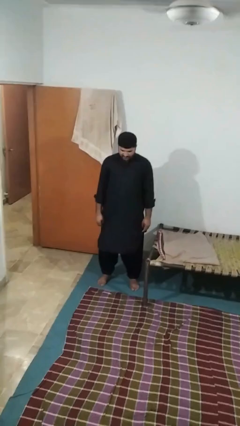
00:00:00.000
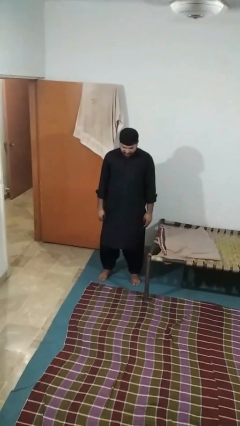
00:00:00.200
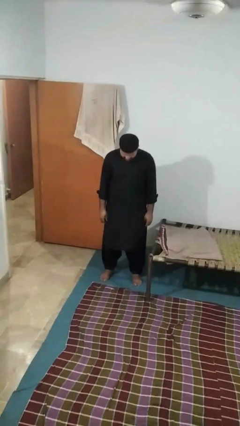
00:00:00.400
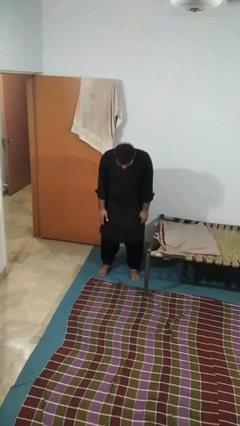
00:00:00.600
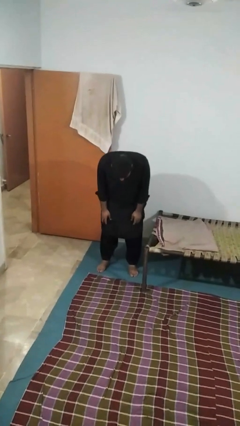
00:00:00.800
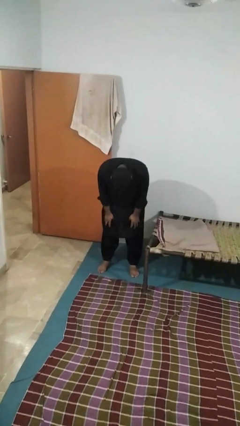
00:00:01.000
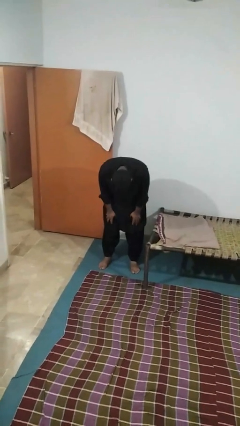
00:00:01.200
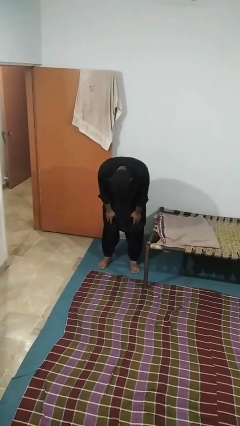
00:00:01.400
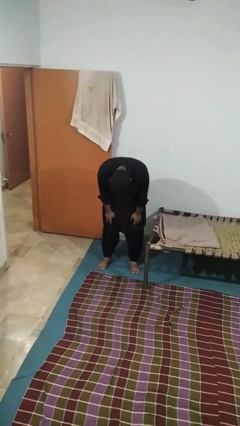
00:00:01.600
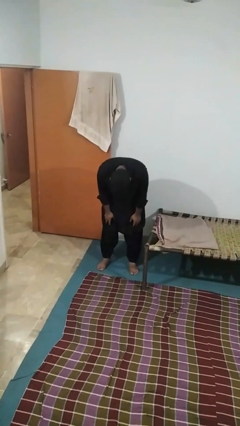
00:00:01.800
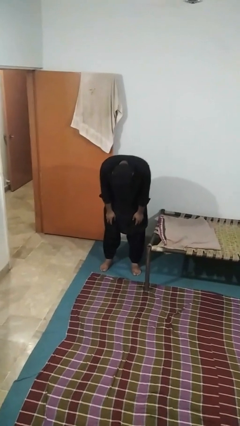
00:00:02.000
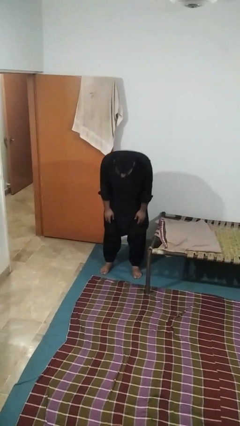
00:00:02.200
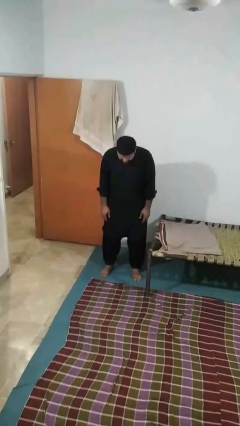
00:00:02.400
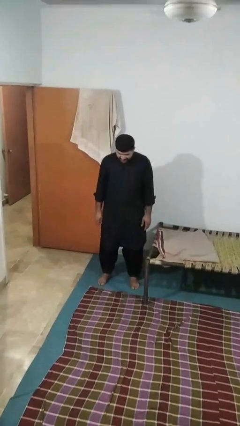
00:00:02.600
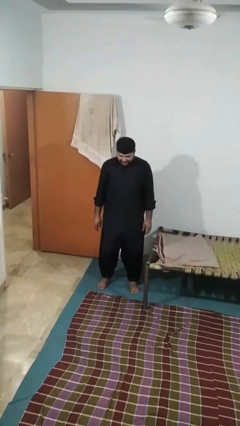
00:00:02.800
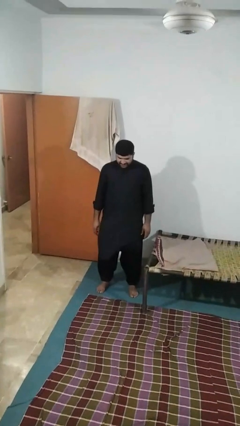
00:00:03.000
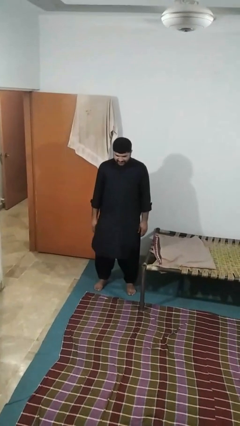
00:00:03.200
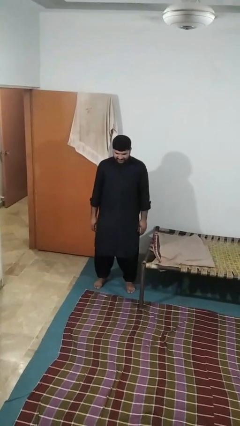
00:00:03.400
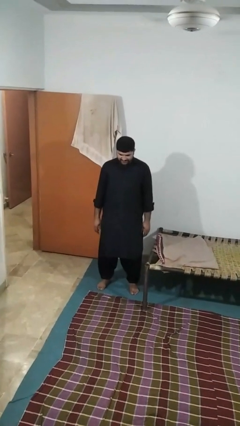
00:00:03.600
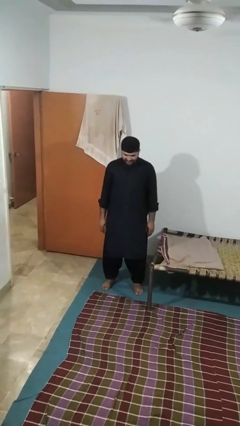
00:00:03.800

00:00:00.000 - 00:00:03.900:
person bows

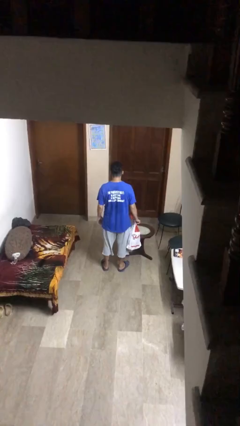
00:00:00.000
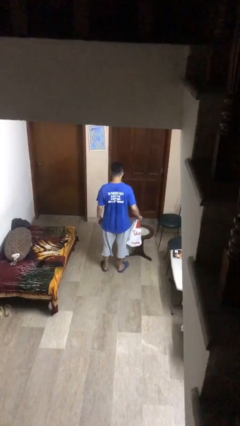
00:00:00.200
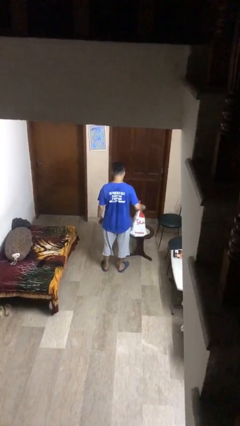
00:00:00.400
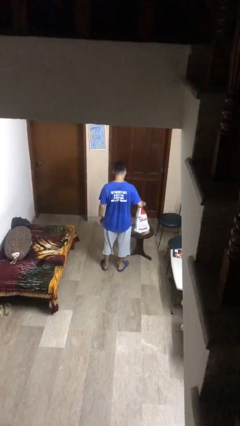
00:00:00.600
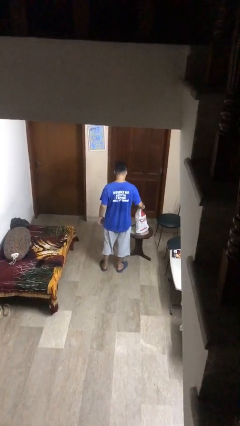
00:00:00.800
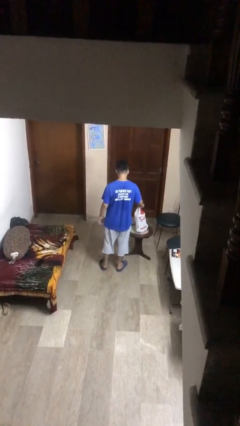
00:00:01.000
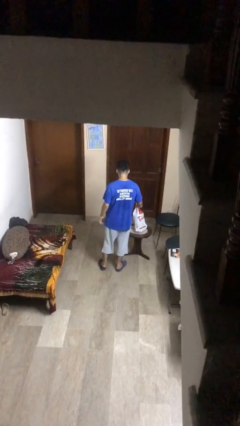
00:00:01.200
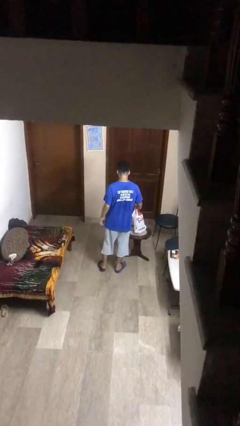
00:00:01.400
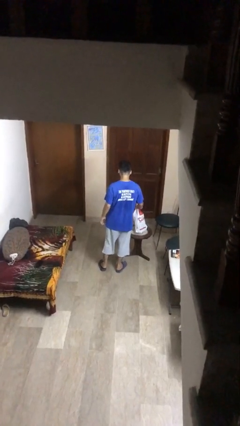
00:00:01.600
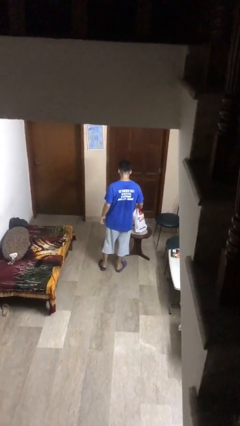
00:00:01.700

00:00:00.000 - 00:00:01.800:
person puts down object on table

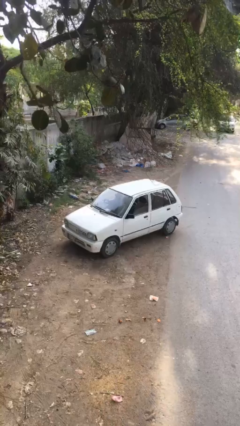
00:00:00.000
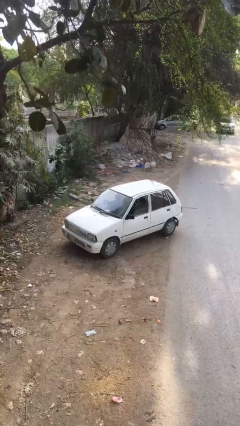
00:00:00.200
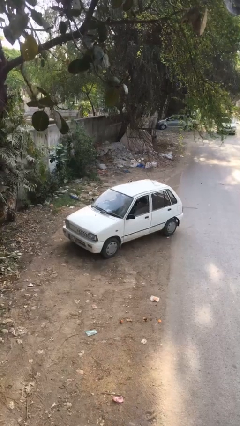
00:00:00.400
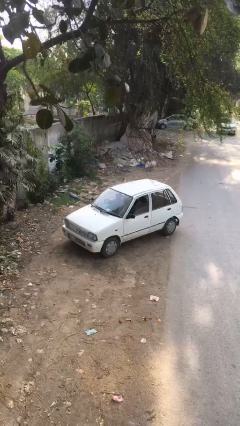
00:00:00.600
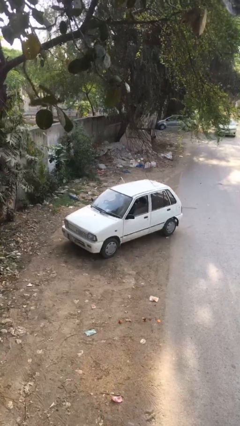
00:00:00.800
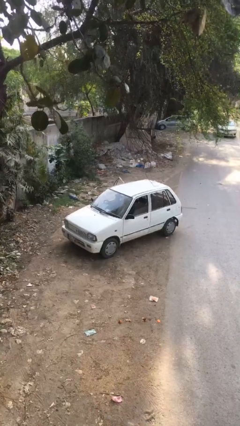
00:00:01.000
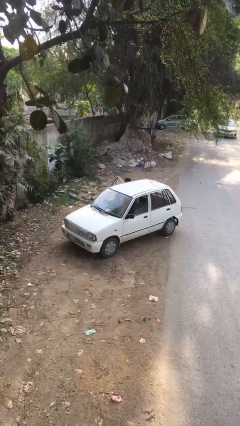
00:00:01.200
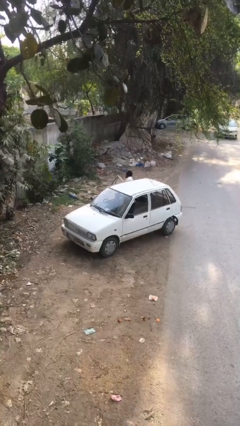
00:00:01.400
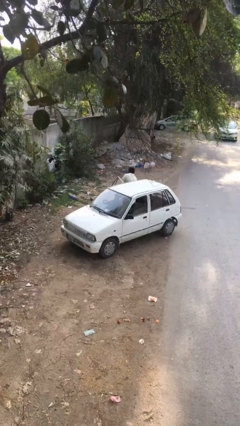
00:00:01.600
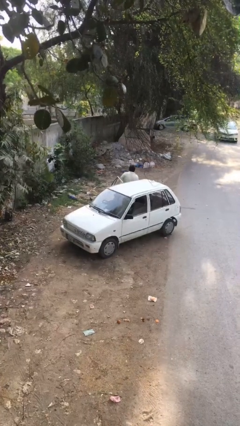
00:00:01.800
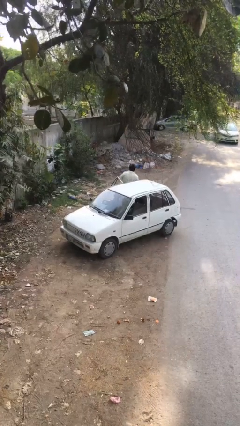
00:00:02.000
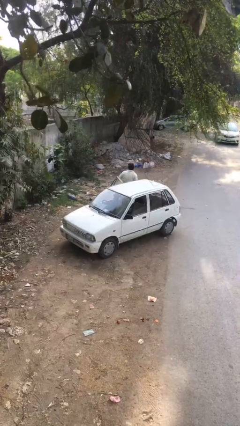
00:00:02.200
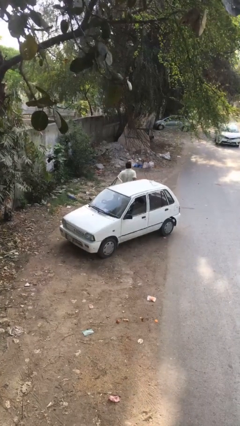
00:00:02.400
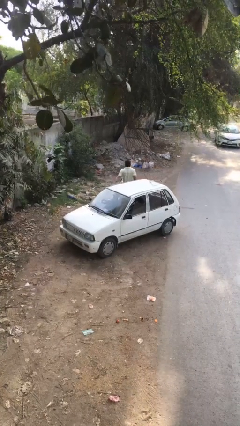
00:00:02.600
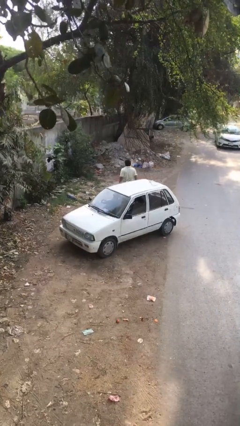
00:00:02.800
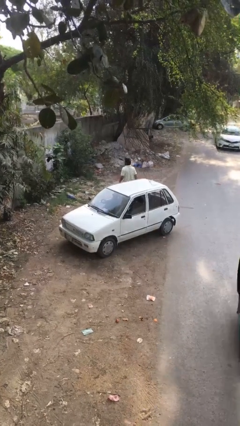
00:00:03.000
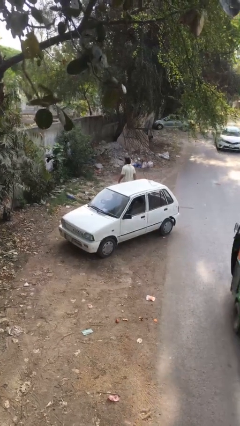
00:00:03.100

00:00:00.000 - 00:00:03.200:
car drops off person

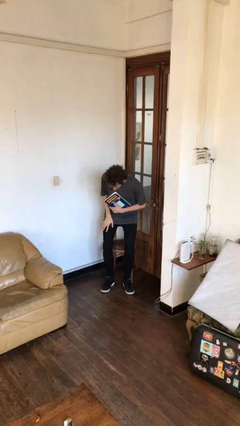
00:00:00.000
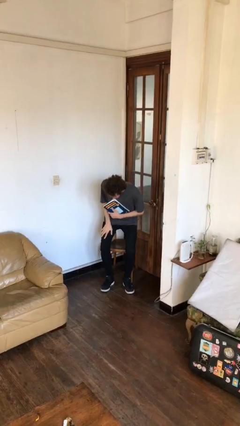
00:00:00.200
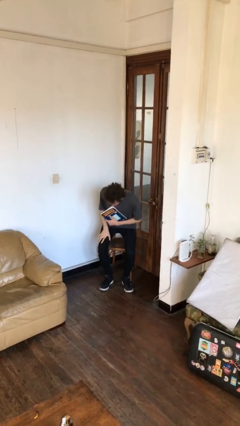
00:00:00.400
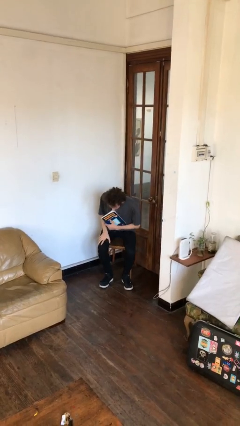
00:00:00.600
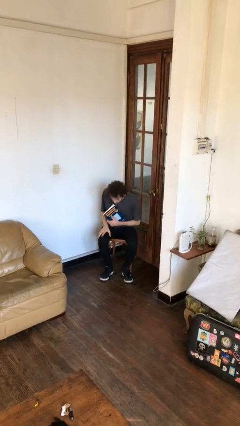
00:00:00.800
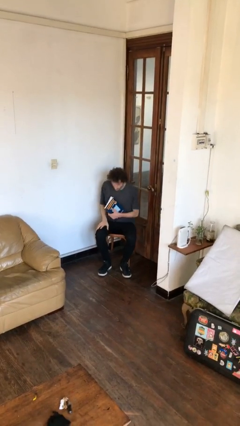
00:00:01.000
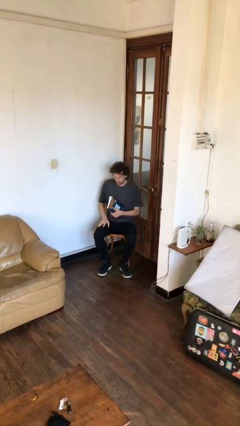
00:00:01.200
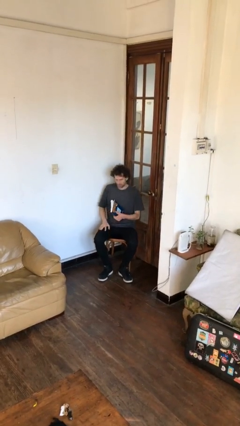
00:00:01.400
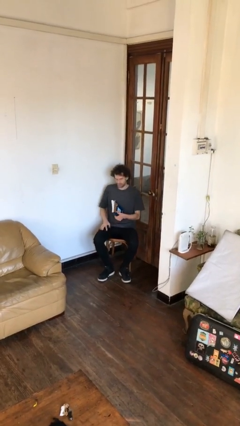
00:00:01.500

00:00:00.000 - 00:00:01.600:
person sits down

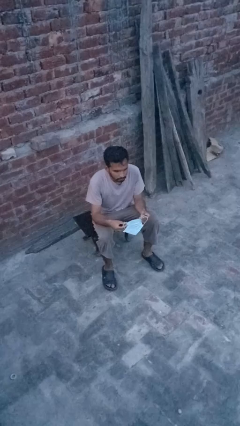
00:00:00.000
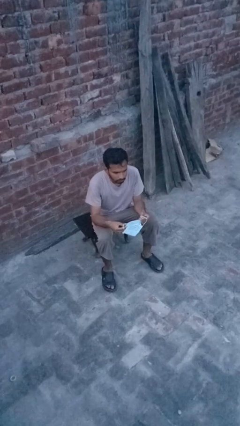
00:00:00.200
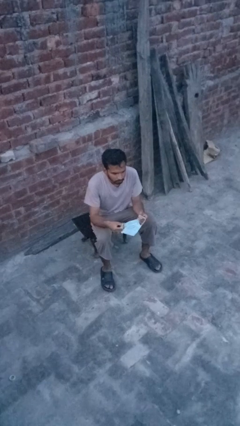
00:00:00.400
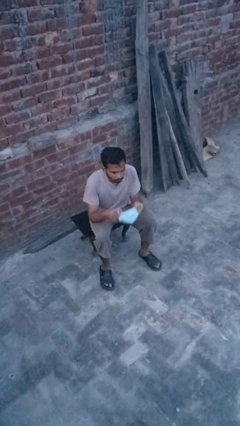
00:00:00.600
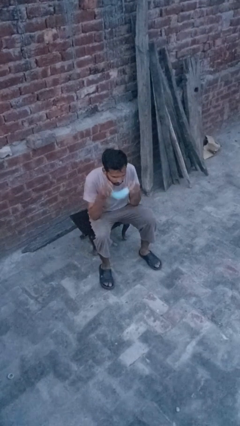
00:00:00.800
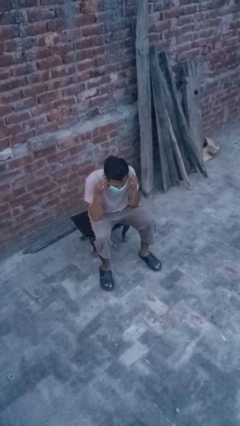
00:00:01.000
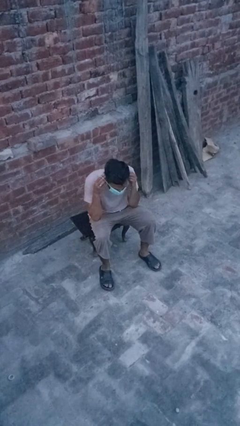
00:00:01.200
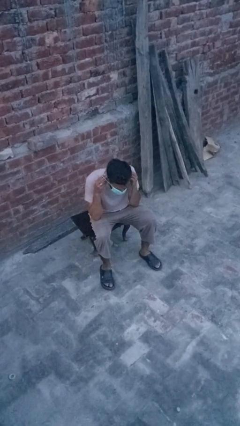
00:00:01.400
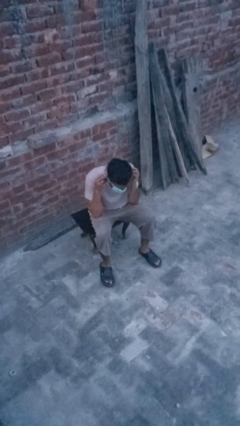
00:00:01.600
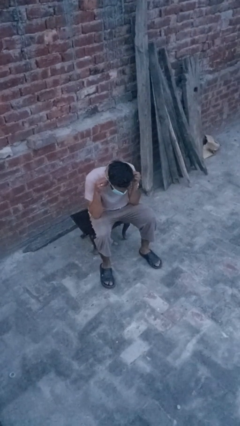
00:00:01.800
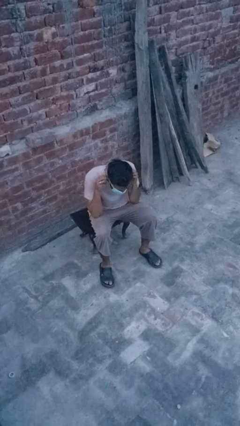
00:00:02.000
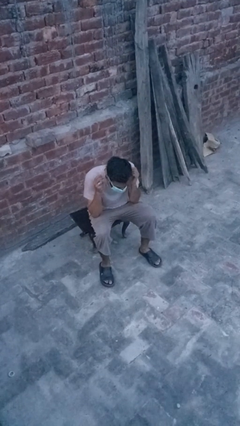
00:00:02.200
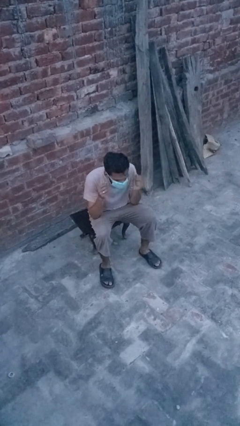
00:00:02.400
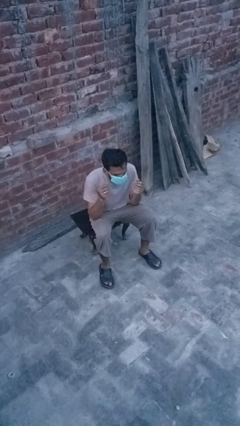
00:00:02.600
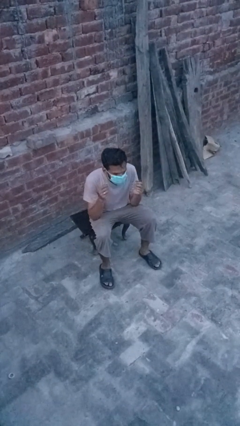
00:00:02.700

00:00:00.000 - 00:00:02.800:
person puts on facemask

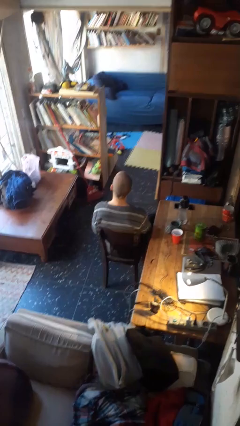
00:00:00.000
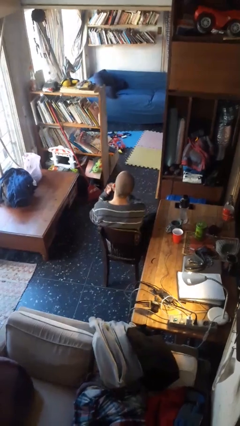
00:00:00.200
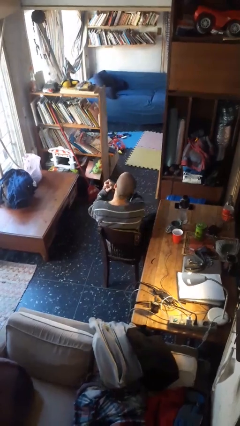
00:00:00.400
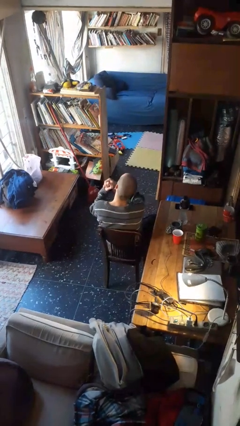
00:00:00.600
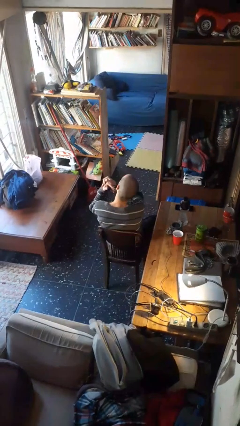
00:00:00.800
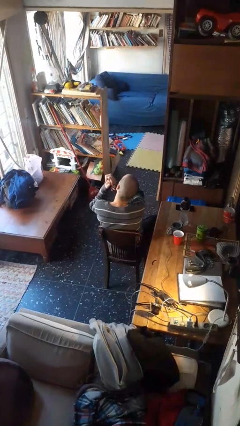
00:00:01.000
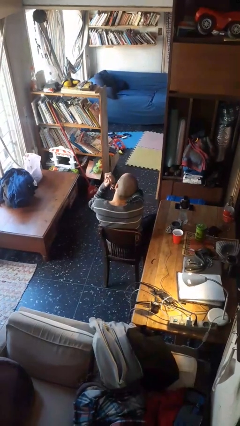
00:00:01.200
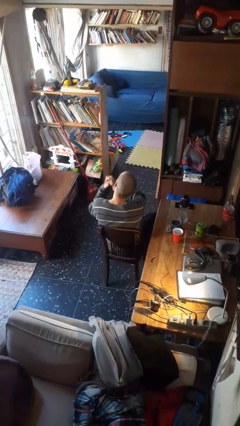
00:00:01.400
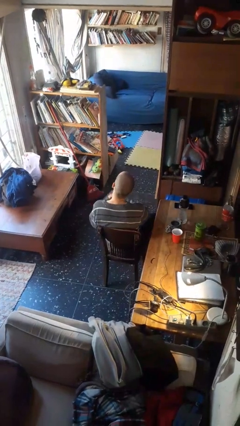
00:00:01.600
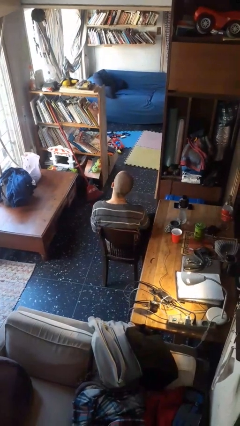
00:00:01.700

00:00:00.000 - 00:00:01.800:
person snaps fingers

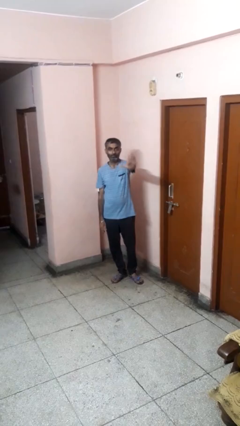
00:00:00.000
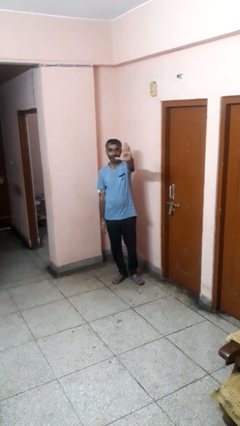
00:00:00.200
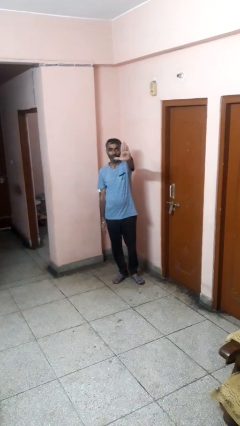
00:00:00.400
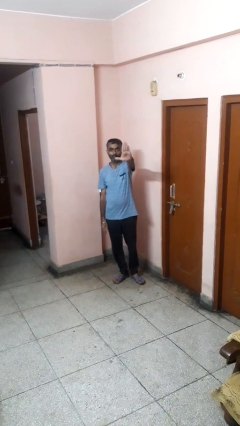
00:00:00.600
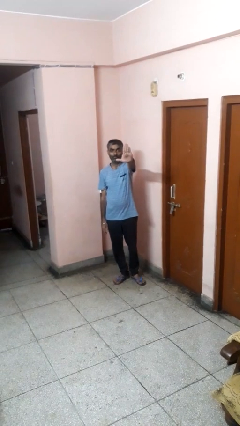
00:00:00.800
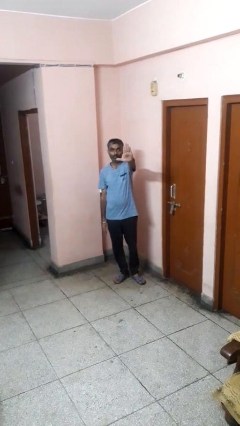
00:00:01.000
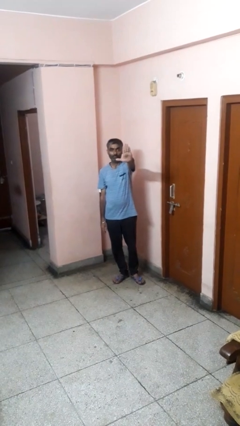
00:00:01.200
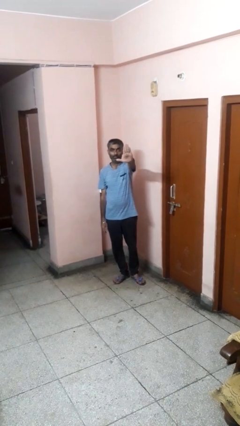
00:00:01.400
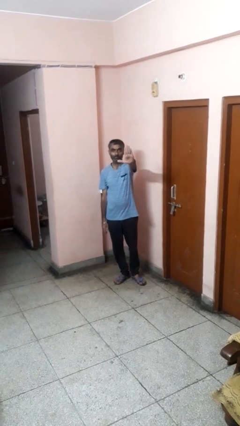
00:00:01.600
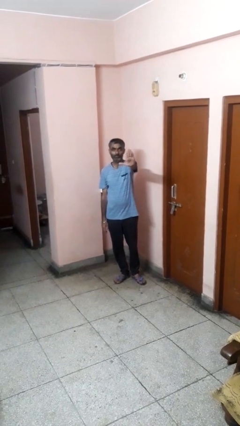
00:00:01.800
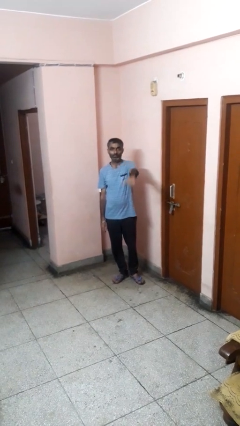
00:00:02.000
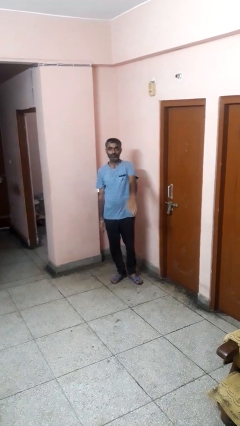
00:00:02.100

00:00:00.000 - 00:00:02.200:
person gestures stop
